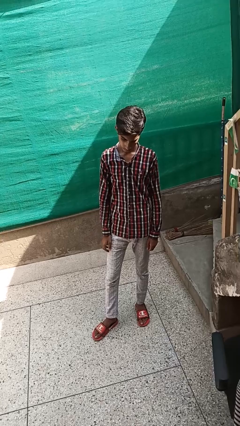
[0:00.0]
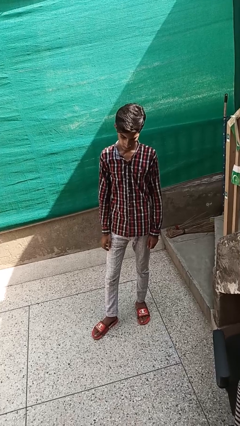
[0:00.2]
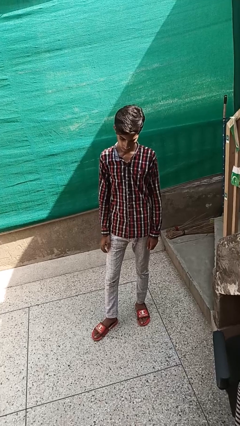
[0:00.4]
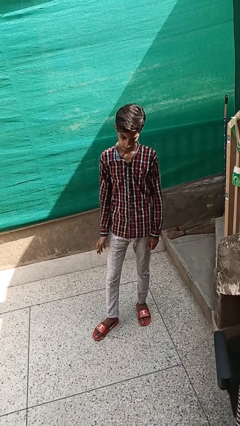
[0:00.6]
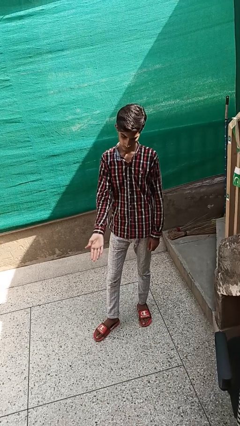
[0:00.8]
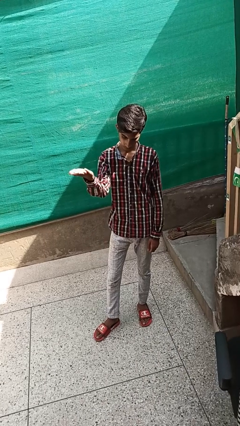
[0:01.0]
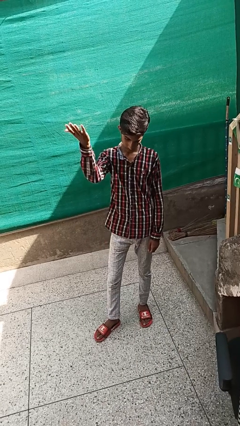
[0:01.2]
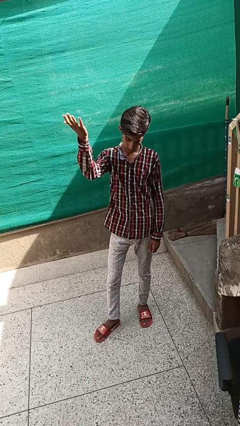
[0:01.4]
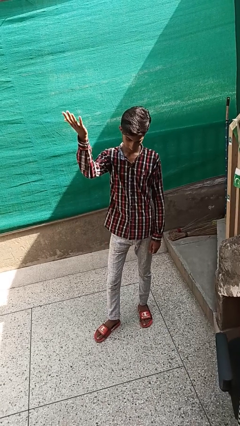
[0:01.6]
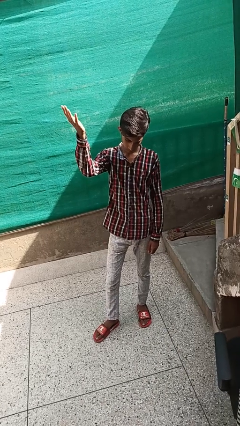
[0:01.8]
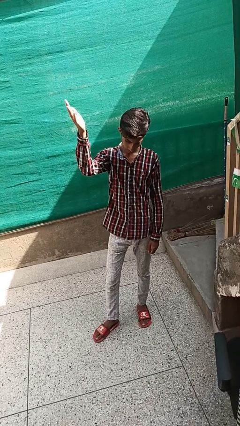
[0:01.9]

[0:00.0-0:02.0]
person gestures swipe up

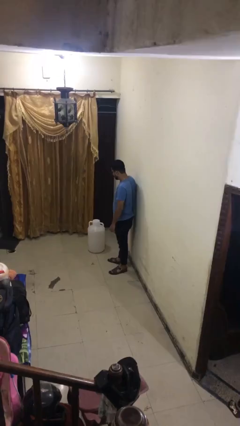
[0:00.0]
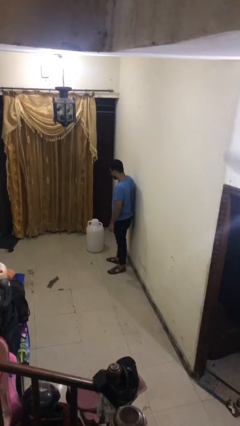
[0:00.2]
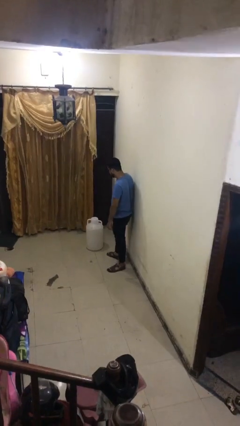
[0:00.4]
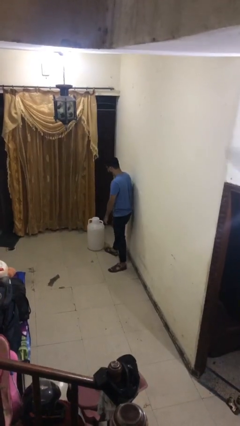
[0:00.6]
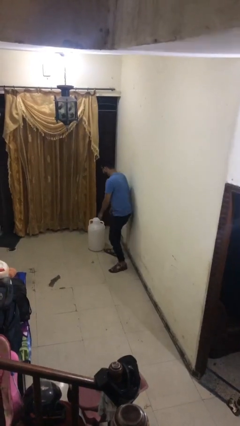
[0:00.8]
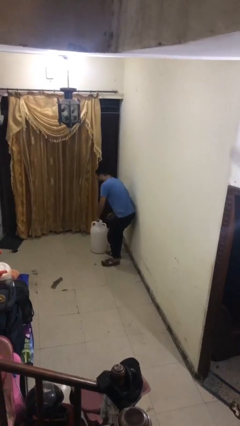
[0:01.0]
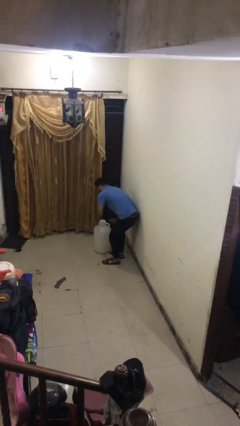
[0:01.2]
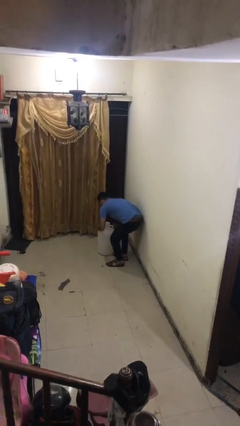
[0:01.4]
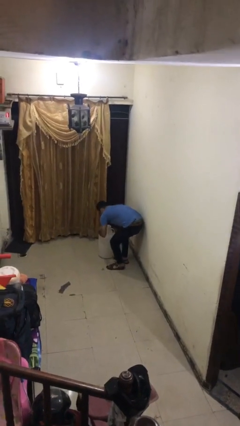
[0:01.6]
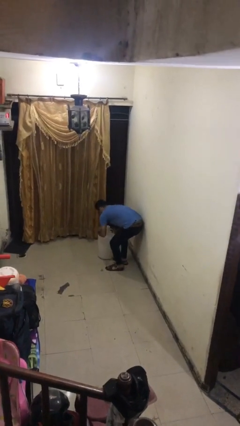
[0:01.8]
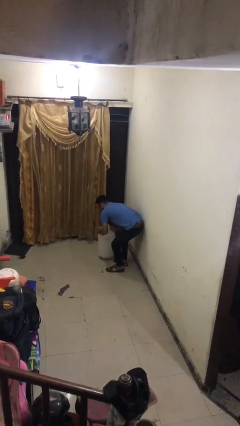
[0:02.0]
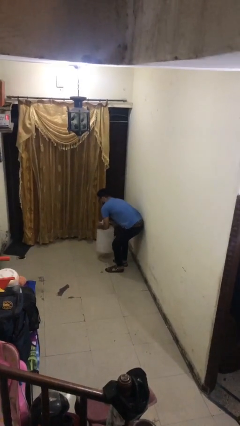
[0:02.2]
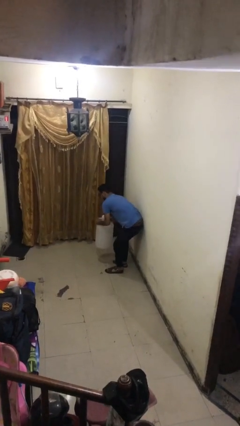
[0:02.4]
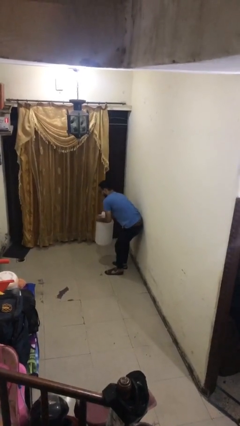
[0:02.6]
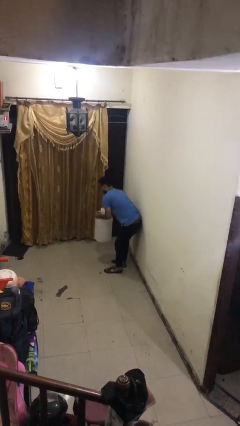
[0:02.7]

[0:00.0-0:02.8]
person picks up object from floor

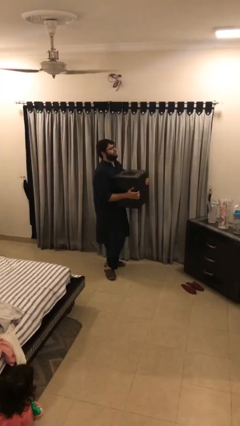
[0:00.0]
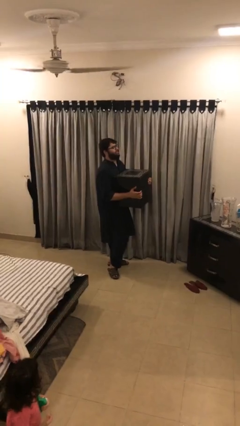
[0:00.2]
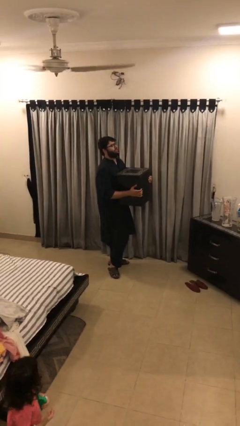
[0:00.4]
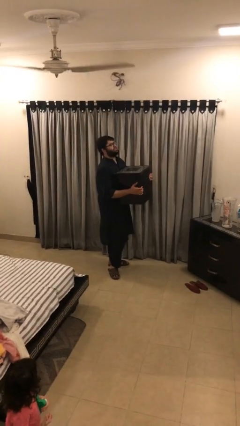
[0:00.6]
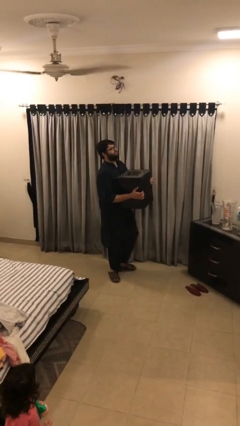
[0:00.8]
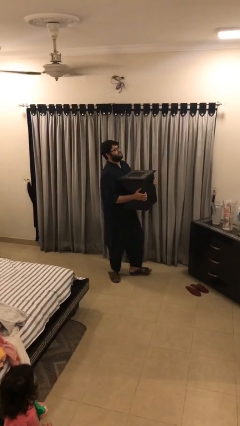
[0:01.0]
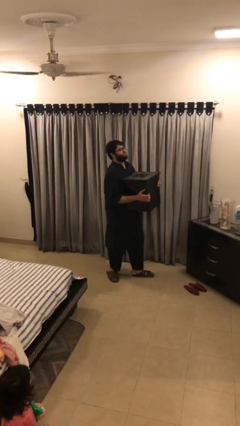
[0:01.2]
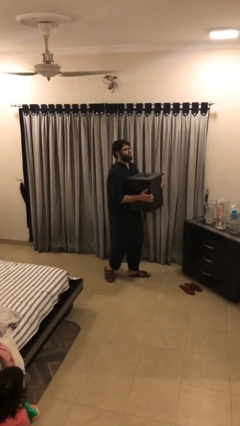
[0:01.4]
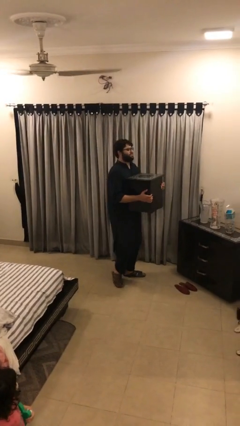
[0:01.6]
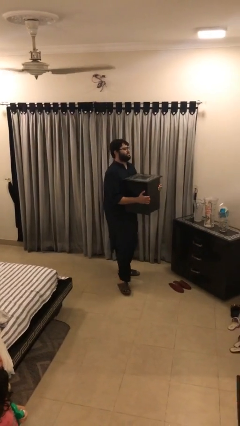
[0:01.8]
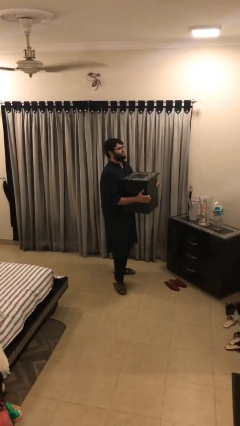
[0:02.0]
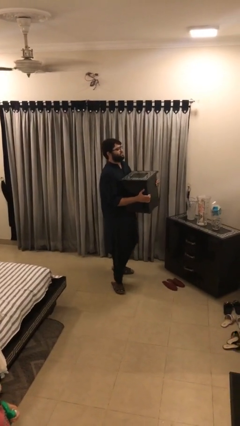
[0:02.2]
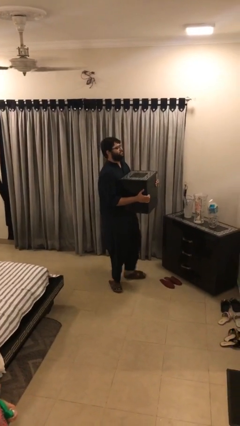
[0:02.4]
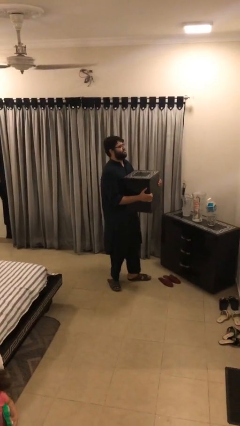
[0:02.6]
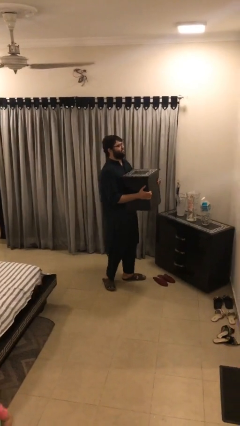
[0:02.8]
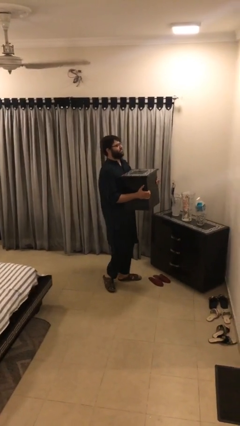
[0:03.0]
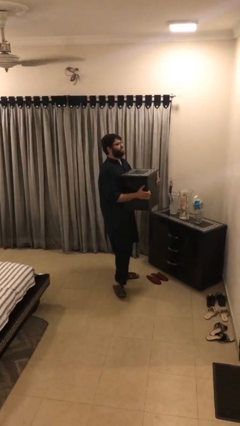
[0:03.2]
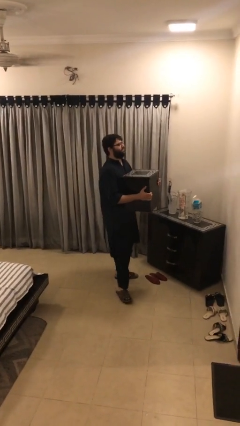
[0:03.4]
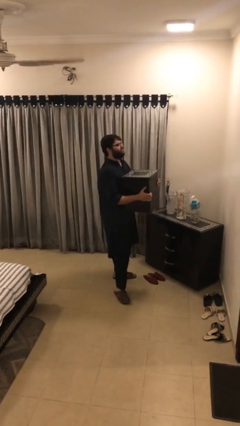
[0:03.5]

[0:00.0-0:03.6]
person carries heavy object

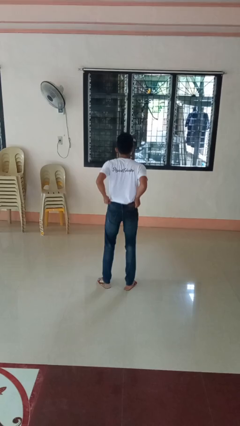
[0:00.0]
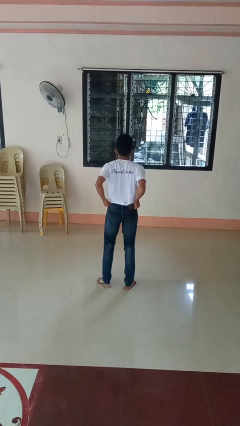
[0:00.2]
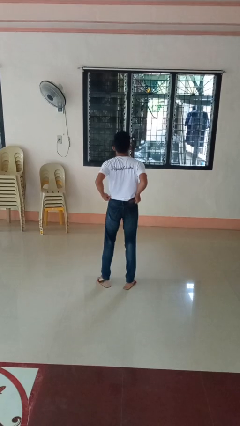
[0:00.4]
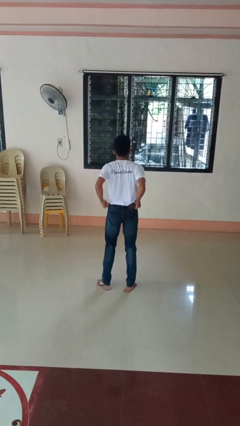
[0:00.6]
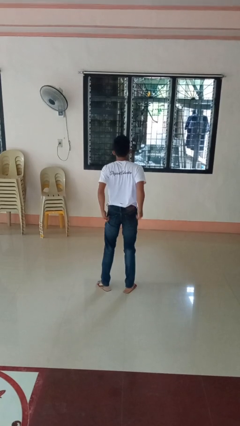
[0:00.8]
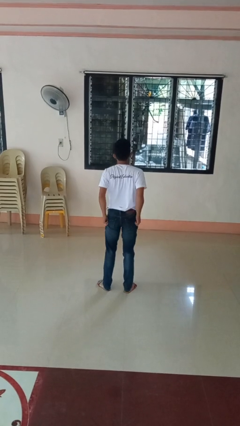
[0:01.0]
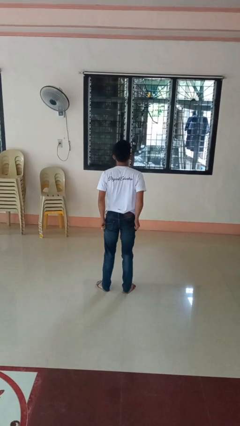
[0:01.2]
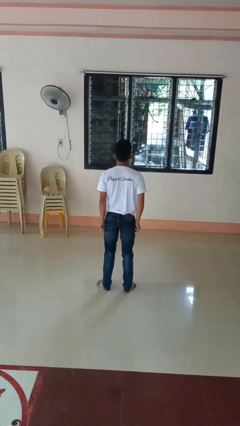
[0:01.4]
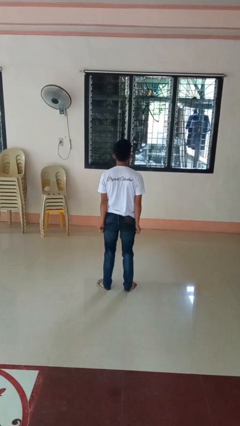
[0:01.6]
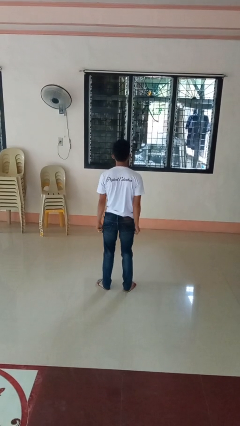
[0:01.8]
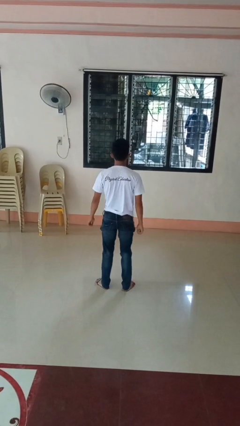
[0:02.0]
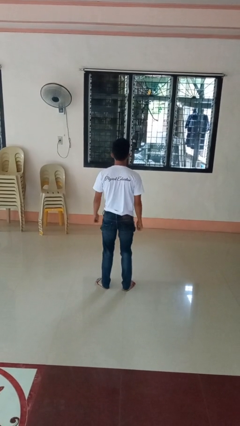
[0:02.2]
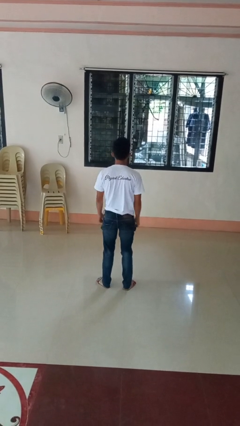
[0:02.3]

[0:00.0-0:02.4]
person hikes up pants

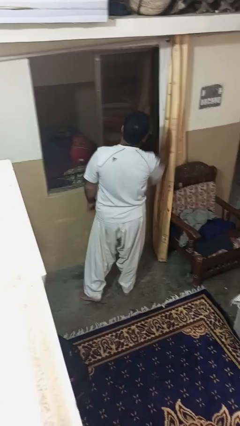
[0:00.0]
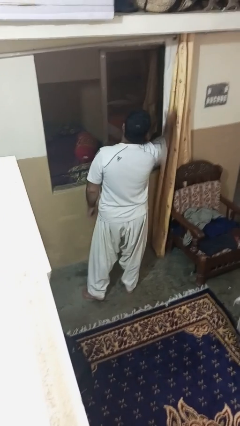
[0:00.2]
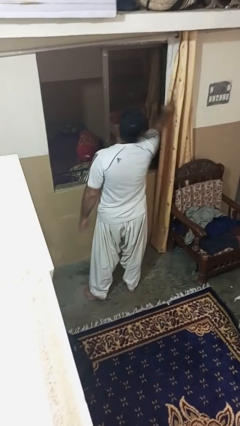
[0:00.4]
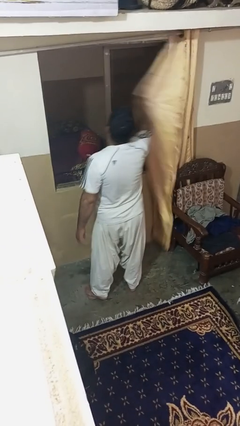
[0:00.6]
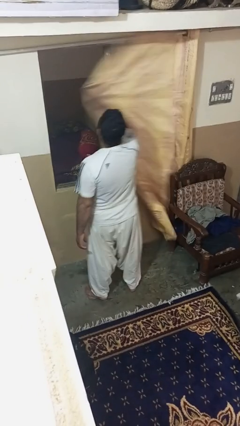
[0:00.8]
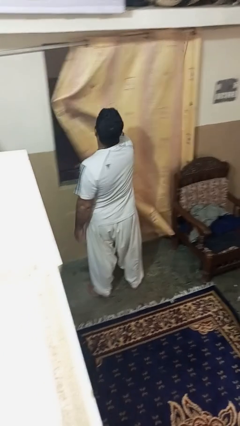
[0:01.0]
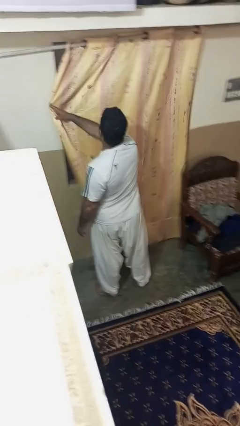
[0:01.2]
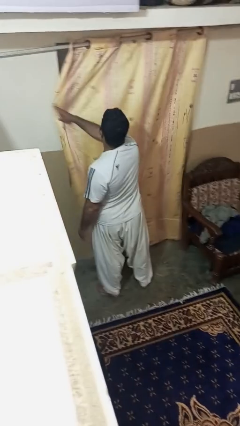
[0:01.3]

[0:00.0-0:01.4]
person closes curtains

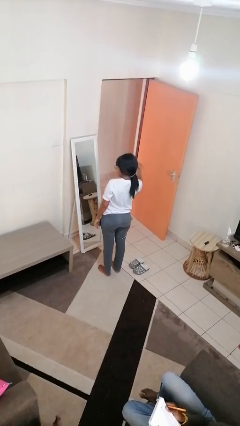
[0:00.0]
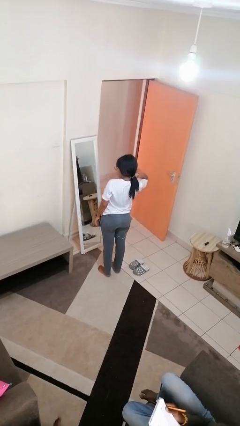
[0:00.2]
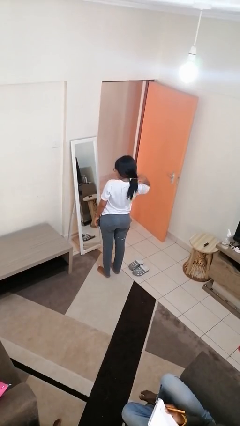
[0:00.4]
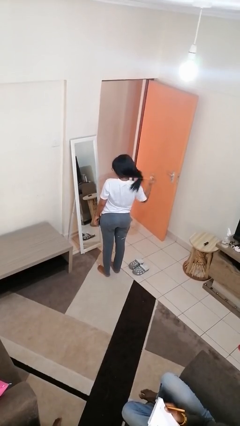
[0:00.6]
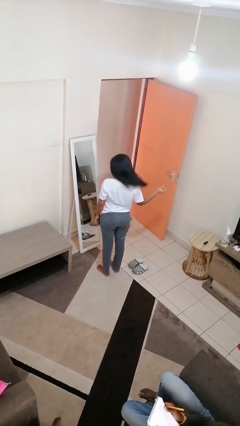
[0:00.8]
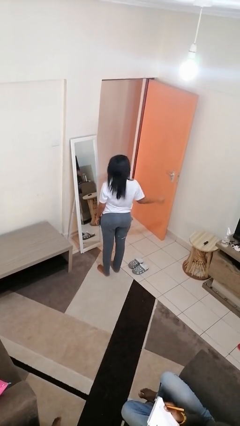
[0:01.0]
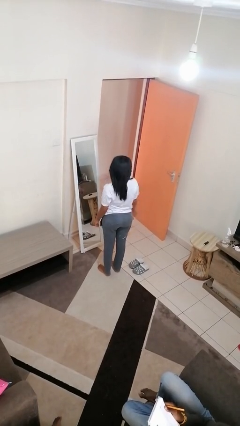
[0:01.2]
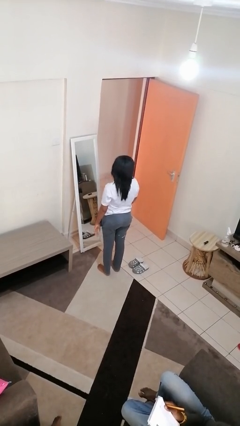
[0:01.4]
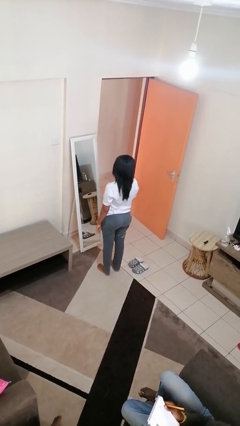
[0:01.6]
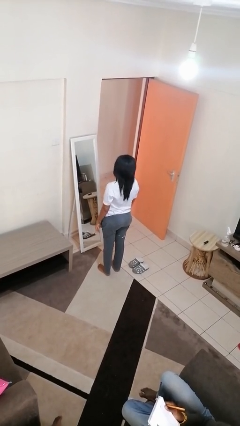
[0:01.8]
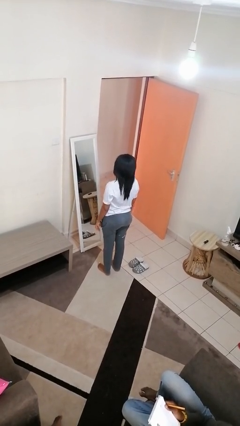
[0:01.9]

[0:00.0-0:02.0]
person takes off hairtie

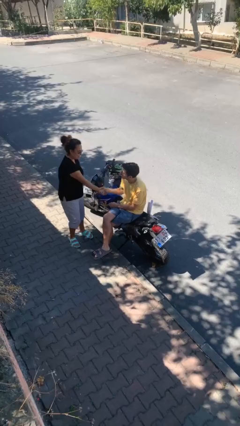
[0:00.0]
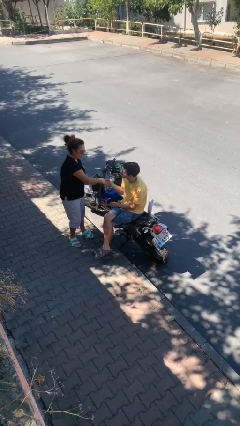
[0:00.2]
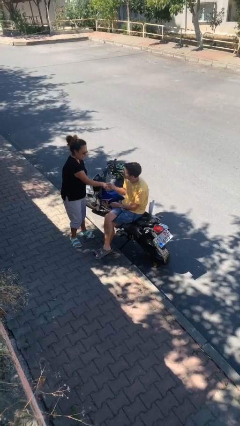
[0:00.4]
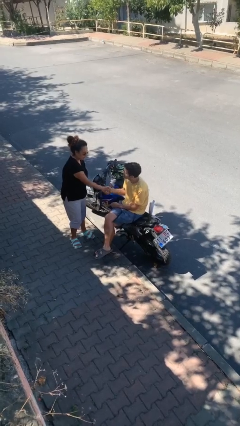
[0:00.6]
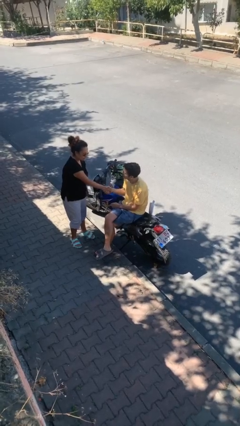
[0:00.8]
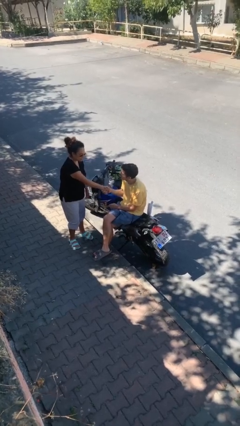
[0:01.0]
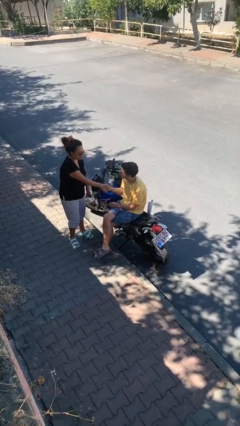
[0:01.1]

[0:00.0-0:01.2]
person shakes hand

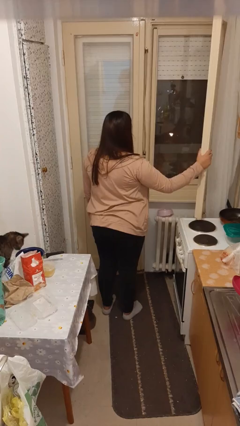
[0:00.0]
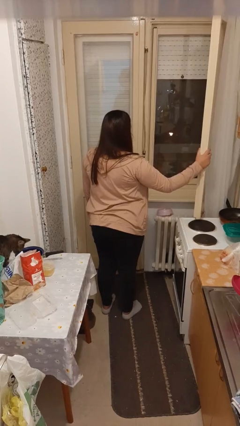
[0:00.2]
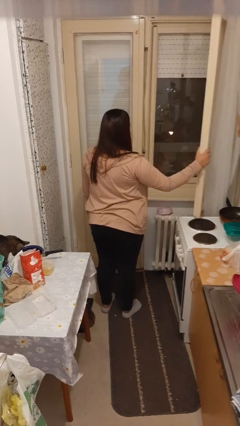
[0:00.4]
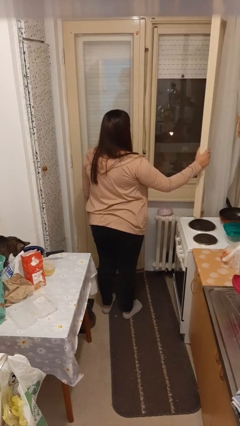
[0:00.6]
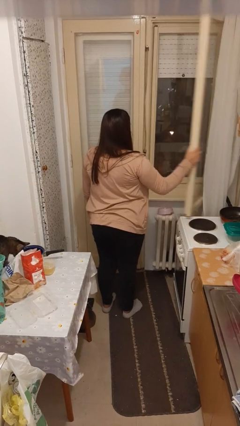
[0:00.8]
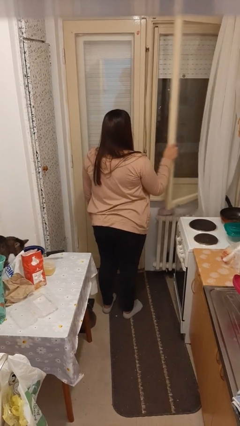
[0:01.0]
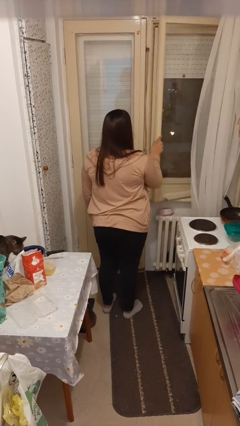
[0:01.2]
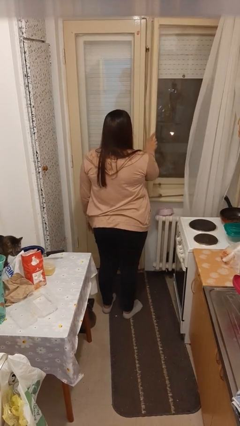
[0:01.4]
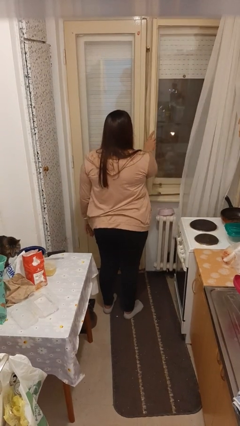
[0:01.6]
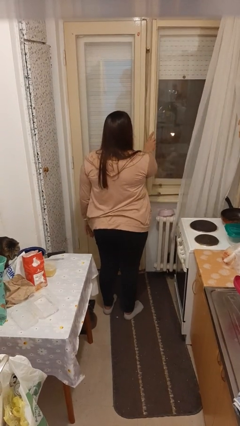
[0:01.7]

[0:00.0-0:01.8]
person closes home window
